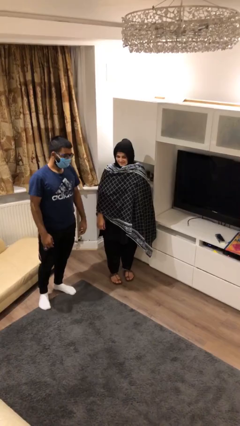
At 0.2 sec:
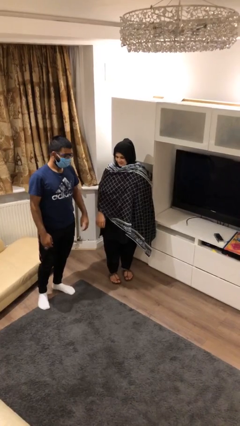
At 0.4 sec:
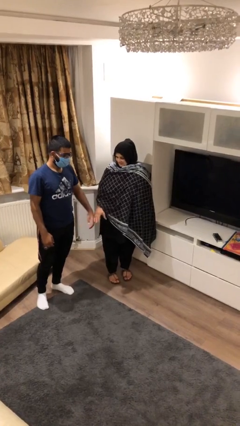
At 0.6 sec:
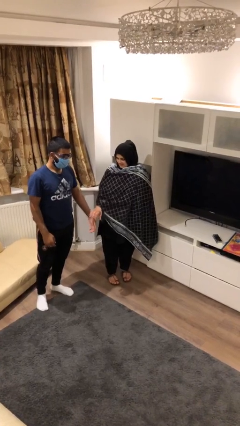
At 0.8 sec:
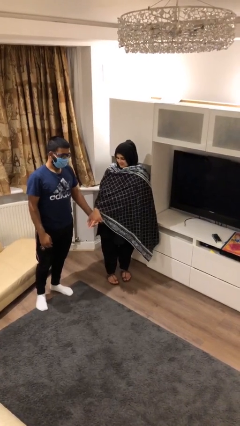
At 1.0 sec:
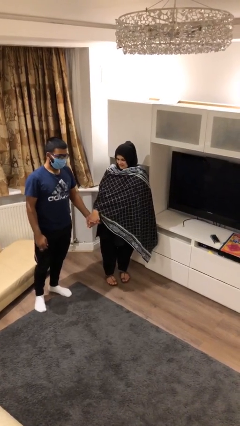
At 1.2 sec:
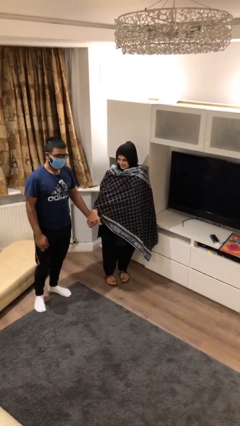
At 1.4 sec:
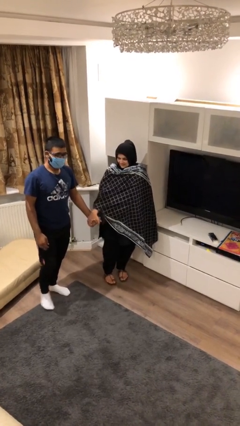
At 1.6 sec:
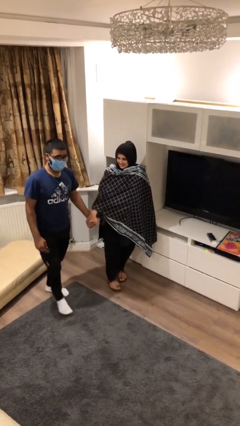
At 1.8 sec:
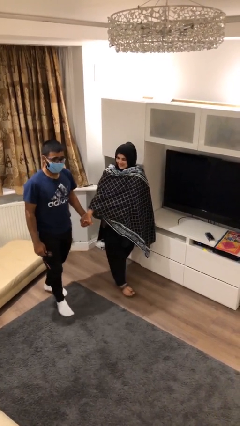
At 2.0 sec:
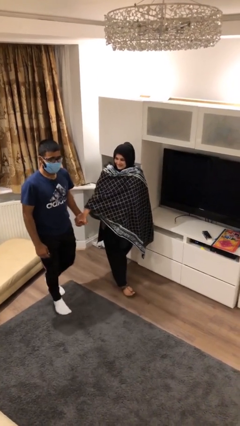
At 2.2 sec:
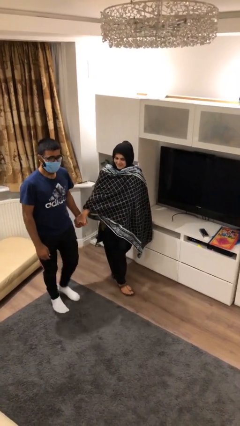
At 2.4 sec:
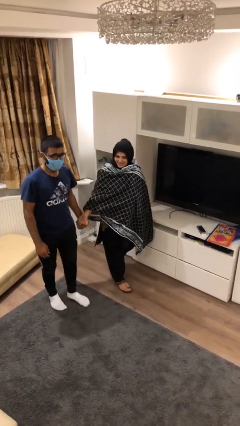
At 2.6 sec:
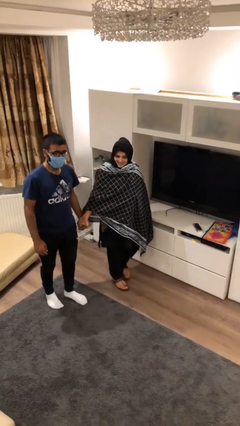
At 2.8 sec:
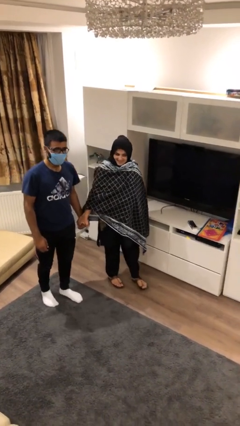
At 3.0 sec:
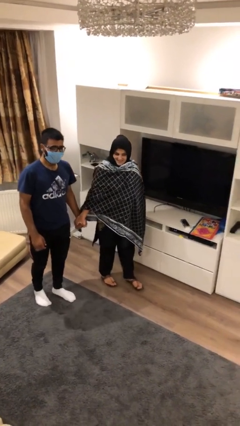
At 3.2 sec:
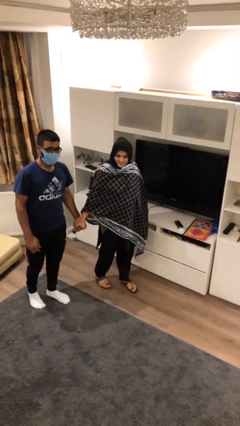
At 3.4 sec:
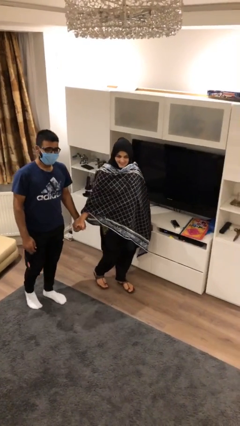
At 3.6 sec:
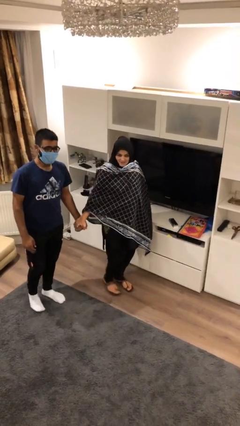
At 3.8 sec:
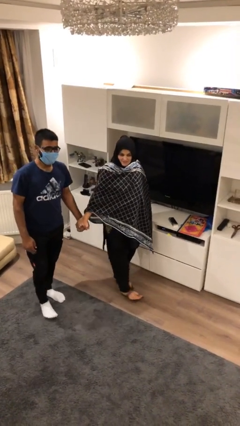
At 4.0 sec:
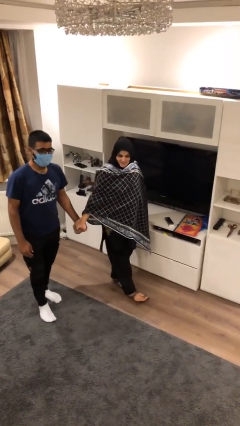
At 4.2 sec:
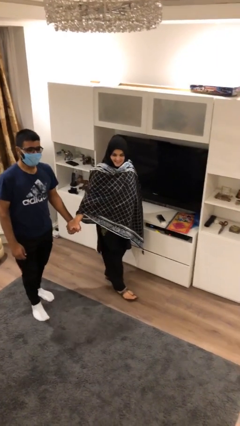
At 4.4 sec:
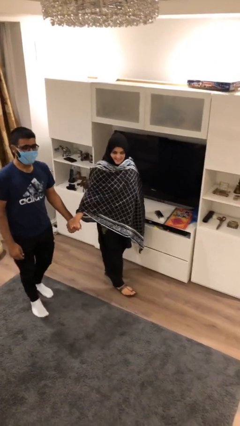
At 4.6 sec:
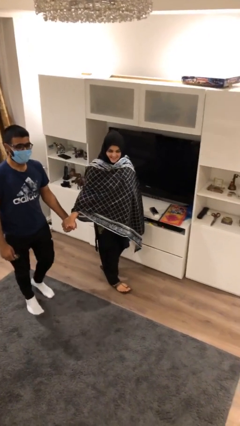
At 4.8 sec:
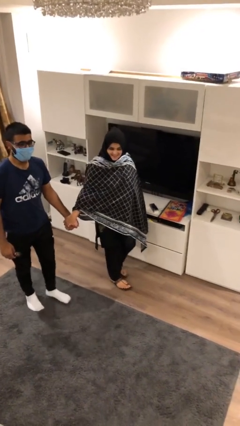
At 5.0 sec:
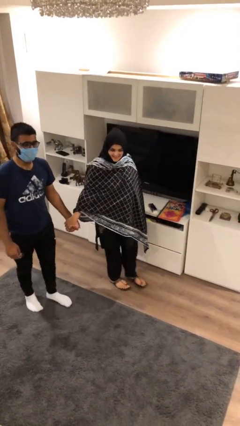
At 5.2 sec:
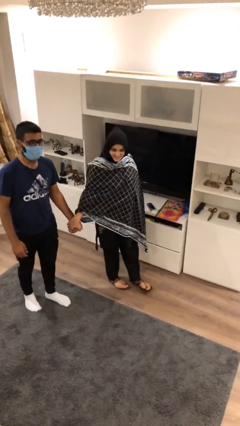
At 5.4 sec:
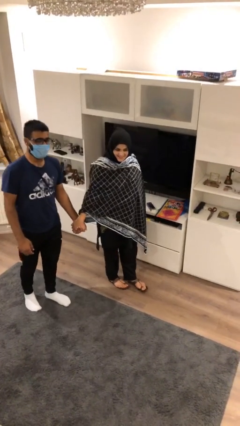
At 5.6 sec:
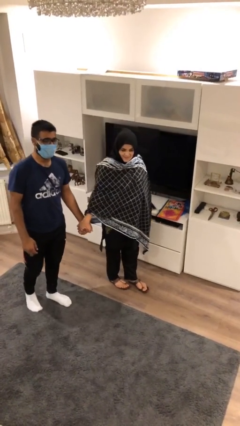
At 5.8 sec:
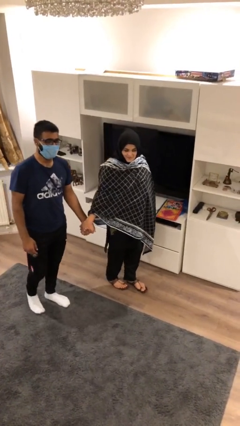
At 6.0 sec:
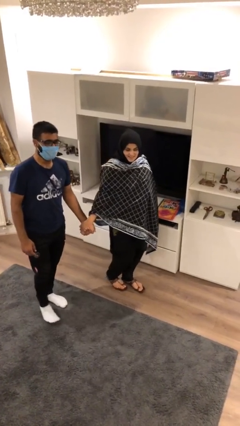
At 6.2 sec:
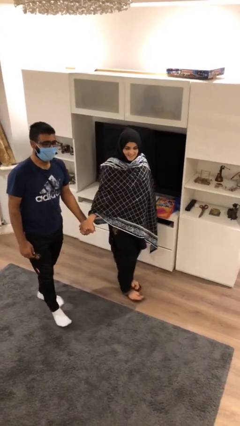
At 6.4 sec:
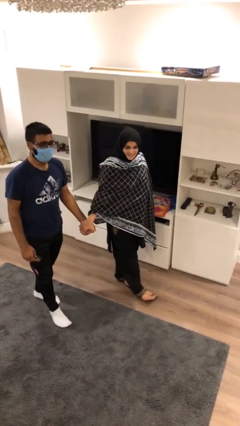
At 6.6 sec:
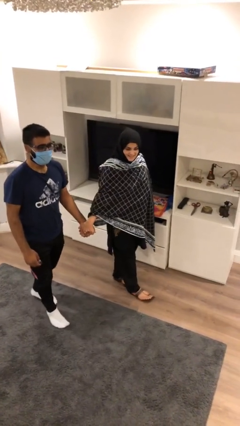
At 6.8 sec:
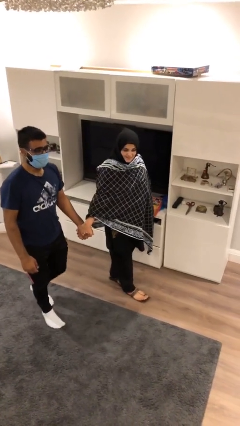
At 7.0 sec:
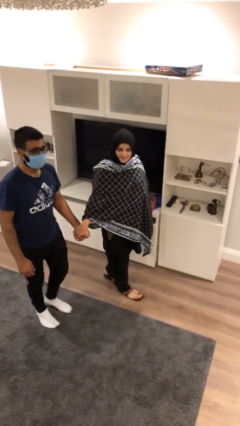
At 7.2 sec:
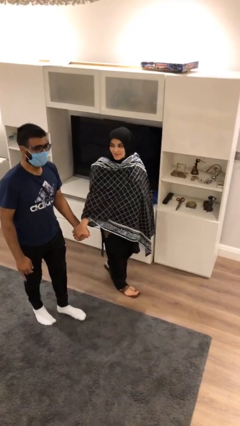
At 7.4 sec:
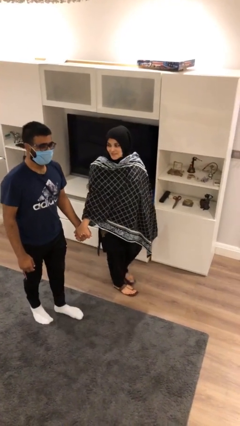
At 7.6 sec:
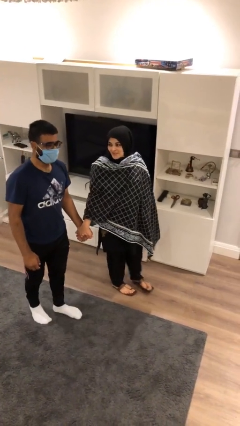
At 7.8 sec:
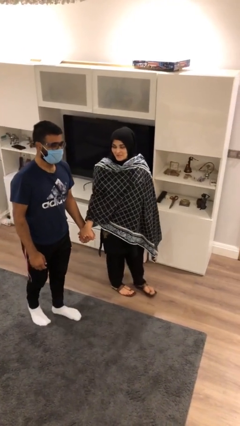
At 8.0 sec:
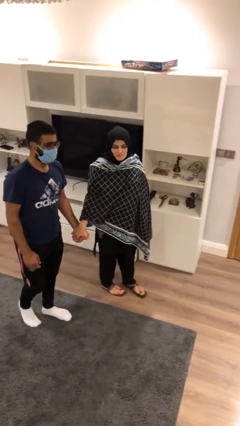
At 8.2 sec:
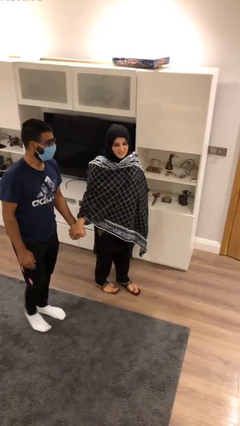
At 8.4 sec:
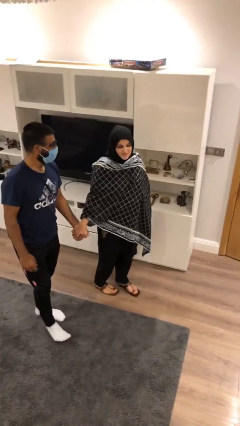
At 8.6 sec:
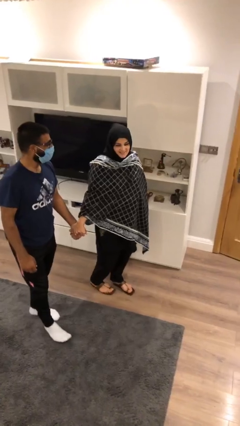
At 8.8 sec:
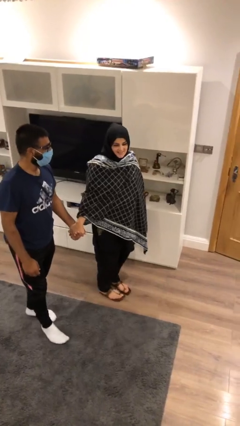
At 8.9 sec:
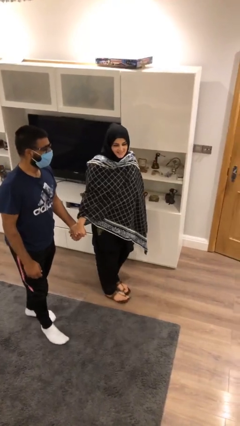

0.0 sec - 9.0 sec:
person holds hand

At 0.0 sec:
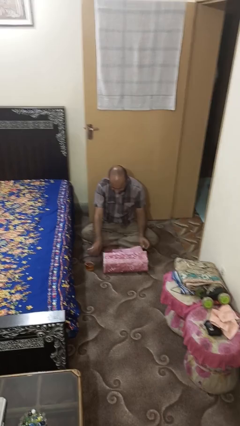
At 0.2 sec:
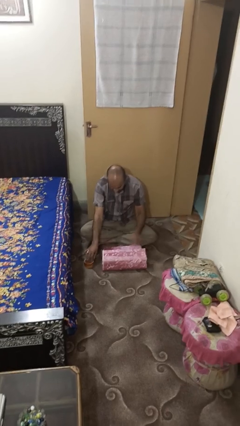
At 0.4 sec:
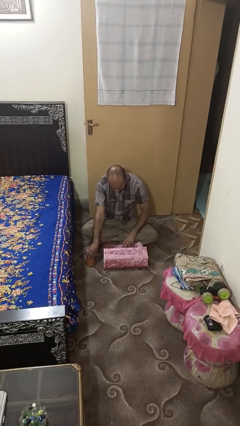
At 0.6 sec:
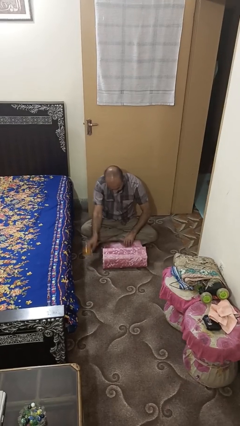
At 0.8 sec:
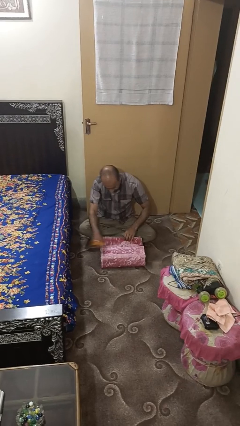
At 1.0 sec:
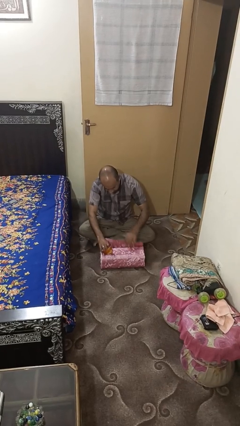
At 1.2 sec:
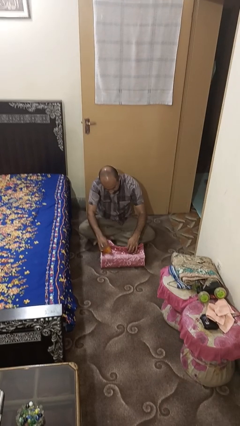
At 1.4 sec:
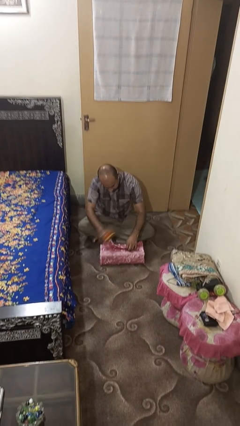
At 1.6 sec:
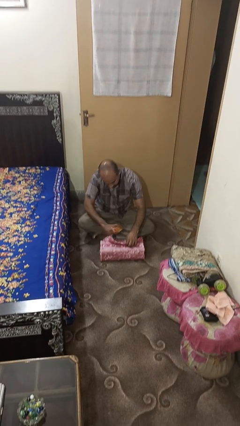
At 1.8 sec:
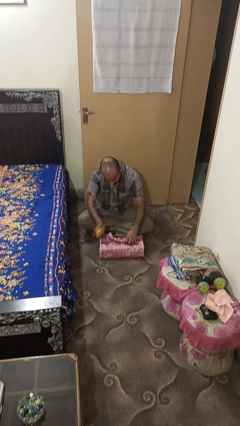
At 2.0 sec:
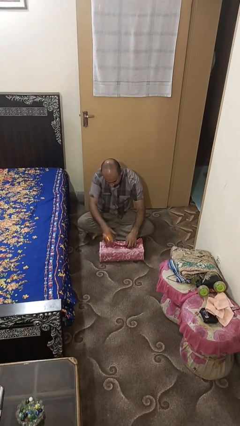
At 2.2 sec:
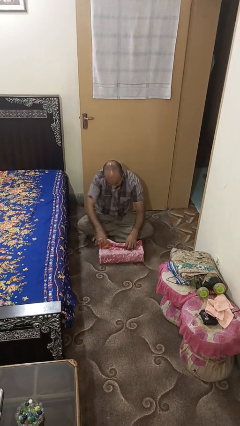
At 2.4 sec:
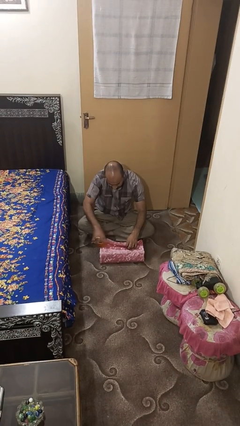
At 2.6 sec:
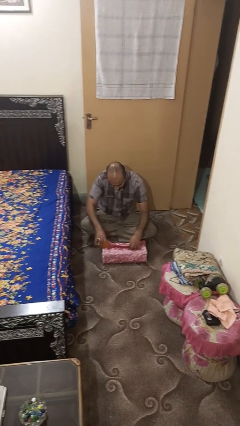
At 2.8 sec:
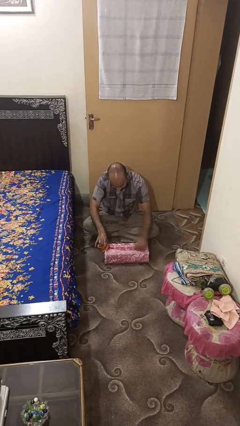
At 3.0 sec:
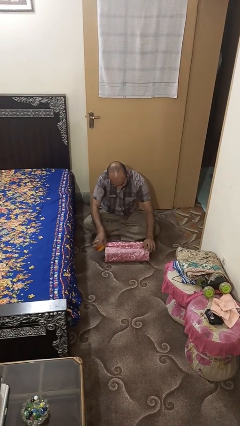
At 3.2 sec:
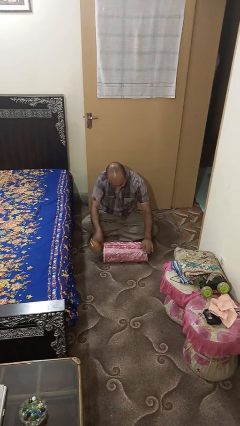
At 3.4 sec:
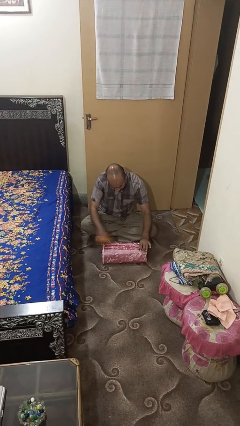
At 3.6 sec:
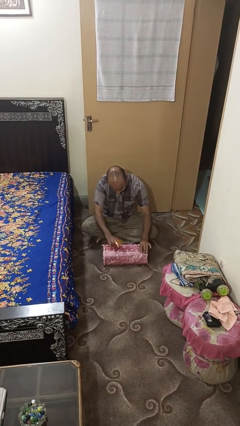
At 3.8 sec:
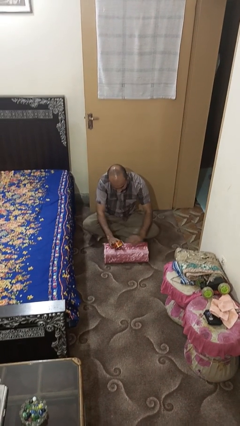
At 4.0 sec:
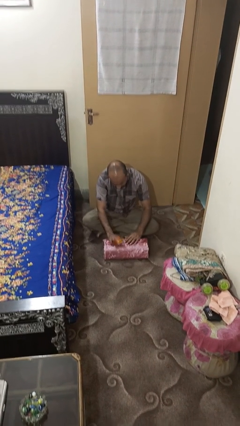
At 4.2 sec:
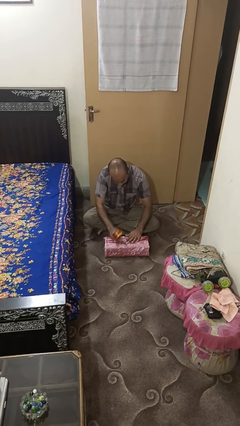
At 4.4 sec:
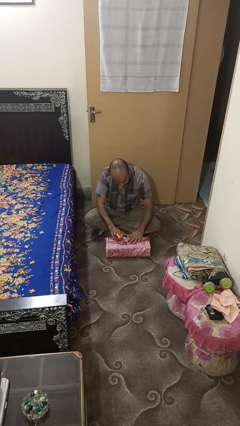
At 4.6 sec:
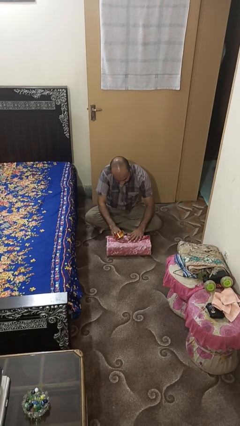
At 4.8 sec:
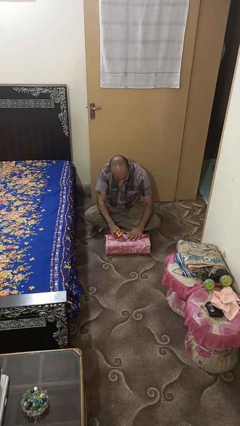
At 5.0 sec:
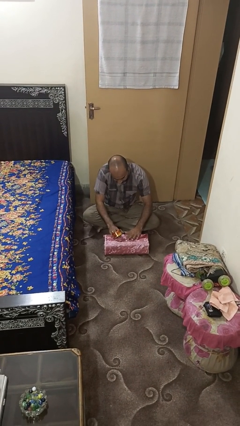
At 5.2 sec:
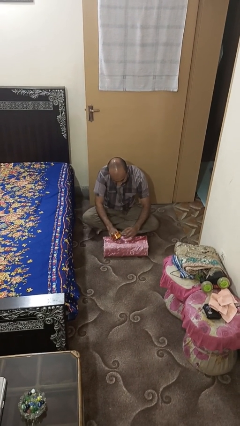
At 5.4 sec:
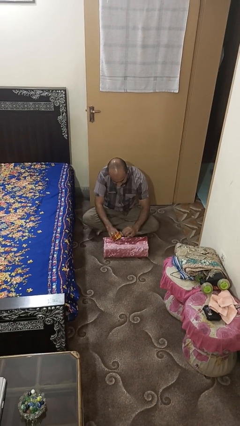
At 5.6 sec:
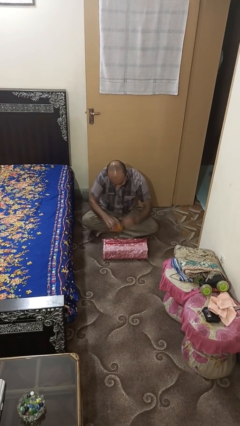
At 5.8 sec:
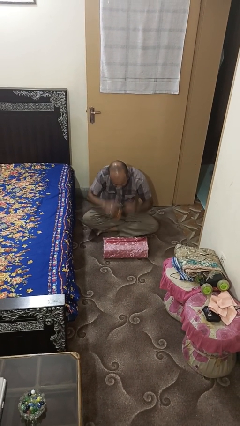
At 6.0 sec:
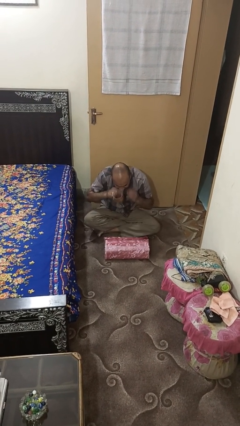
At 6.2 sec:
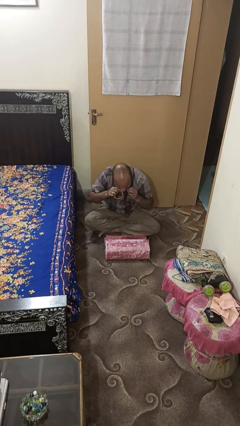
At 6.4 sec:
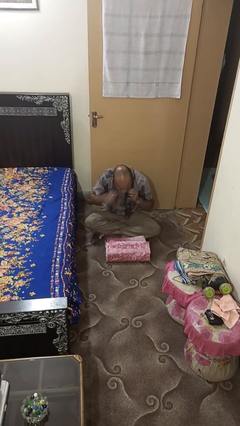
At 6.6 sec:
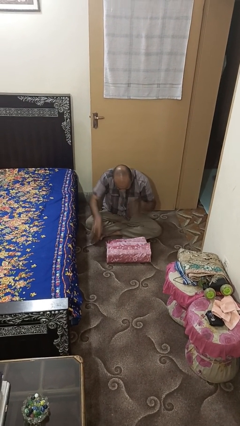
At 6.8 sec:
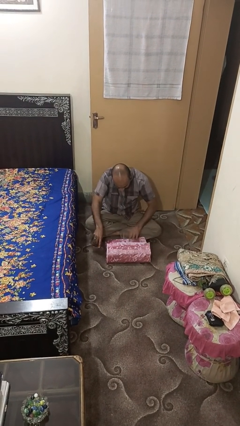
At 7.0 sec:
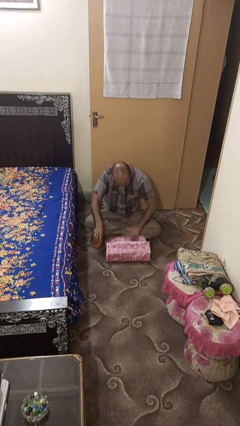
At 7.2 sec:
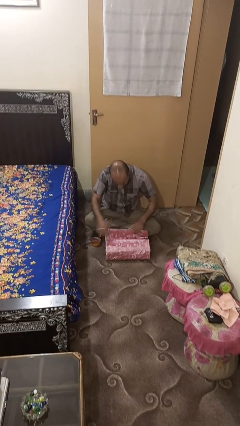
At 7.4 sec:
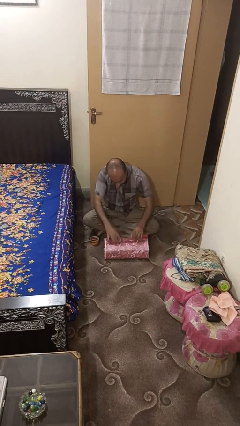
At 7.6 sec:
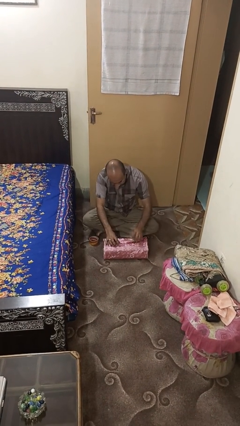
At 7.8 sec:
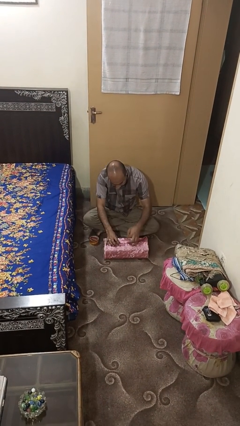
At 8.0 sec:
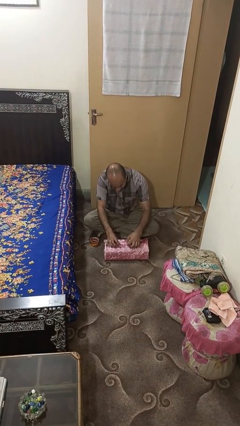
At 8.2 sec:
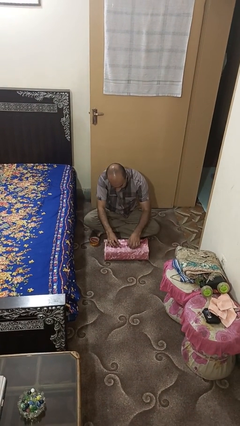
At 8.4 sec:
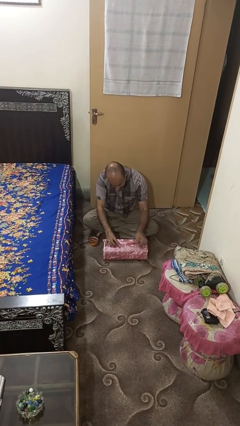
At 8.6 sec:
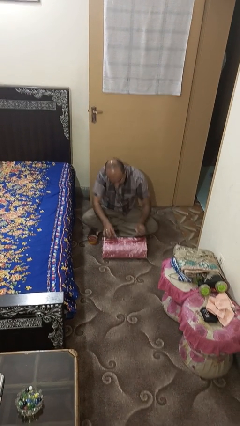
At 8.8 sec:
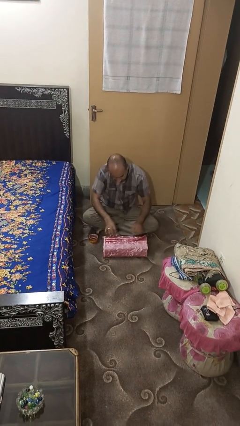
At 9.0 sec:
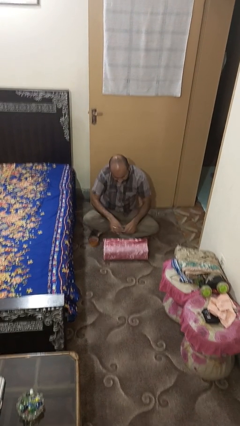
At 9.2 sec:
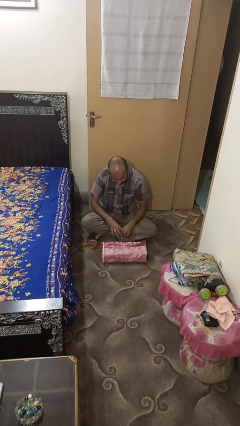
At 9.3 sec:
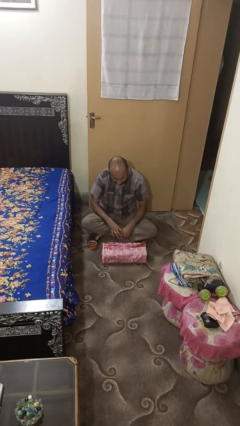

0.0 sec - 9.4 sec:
person wraps box
